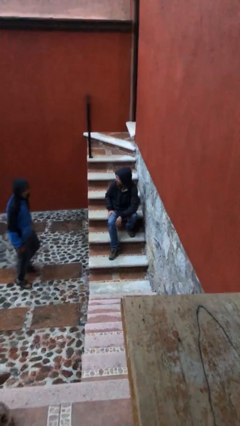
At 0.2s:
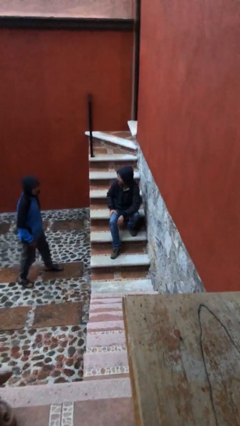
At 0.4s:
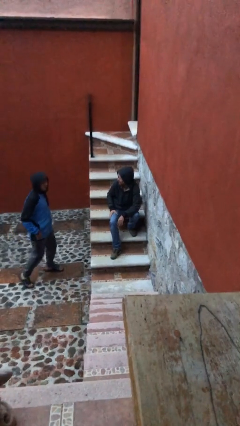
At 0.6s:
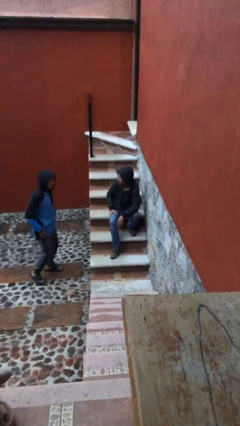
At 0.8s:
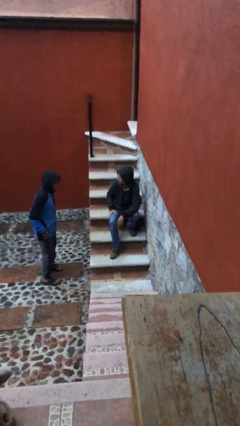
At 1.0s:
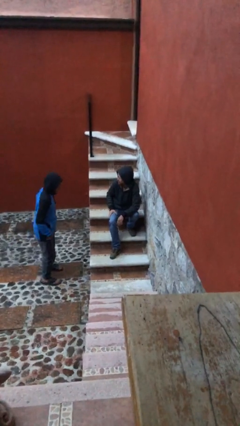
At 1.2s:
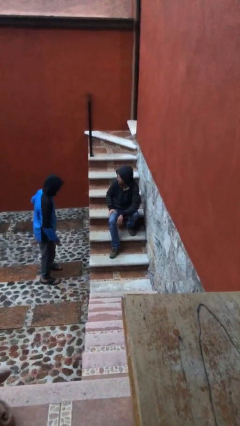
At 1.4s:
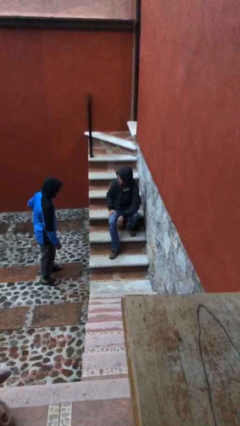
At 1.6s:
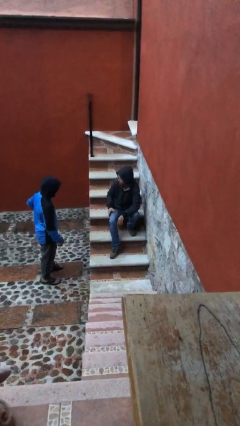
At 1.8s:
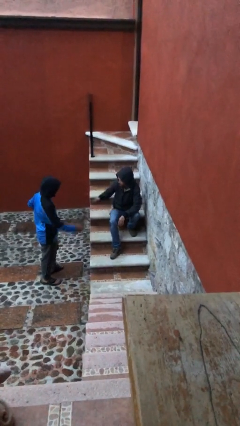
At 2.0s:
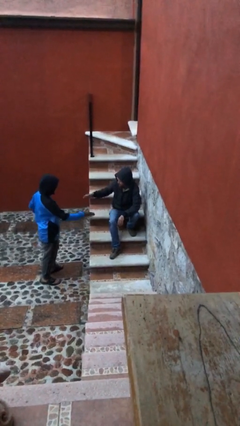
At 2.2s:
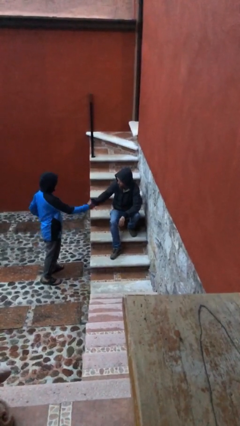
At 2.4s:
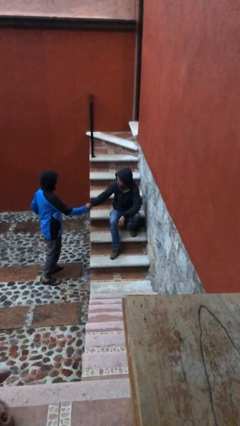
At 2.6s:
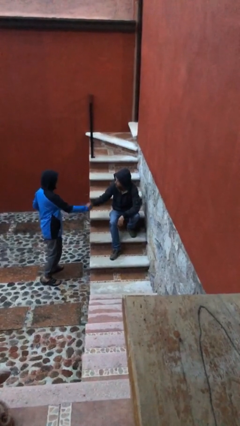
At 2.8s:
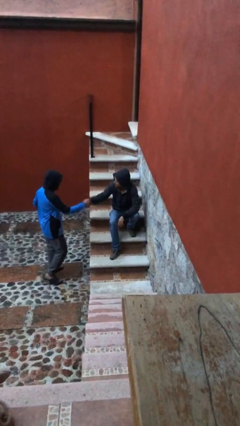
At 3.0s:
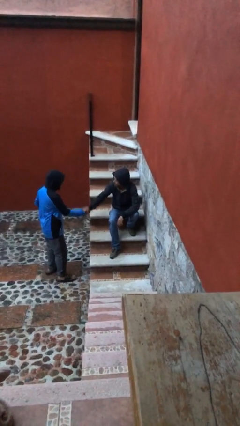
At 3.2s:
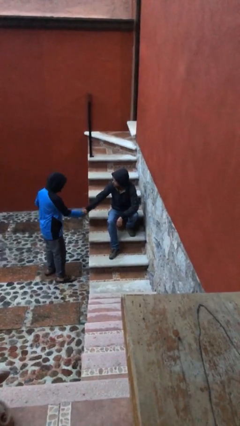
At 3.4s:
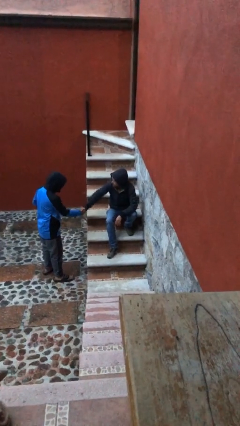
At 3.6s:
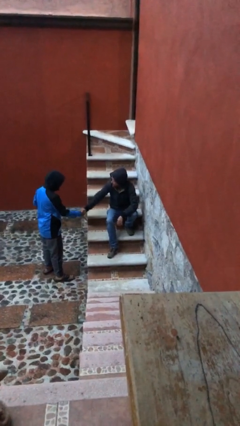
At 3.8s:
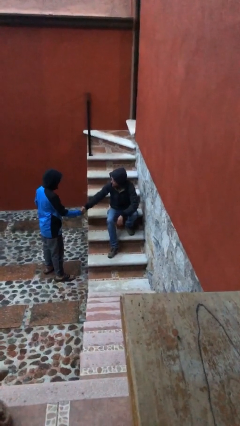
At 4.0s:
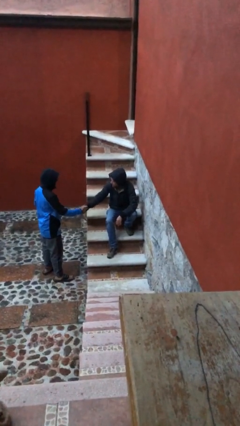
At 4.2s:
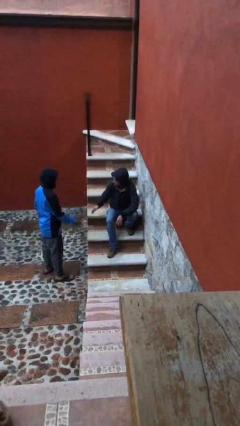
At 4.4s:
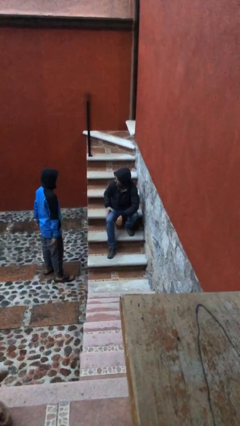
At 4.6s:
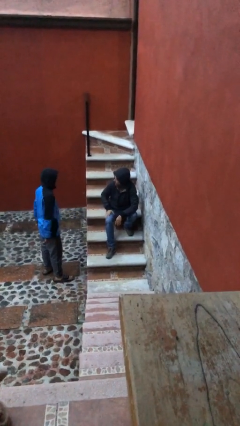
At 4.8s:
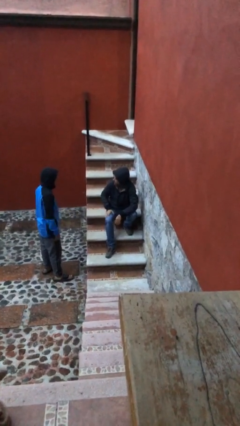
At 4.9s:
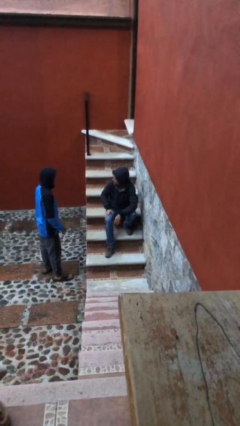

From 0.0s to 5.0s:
person shakes hand

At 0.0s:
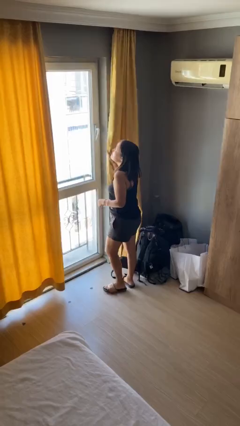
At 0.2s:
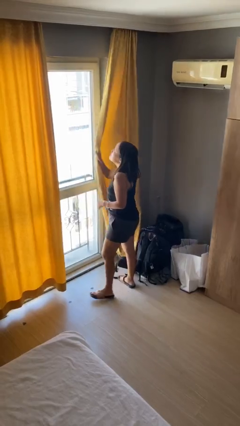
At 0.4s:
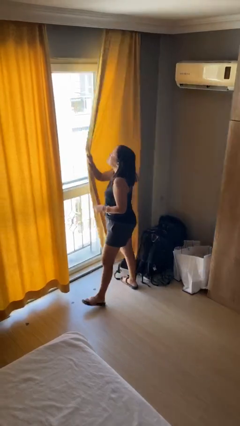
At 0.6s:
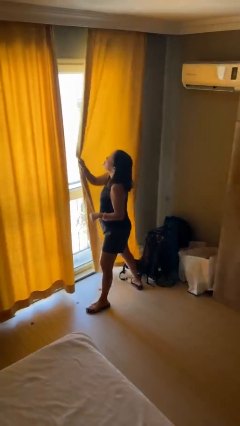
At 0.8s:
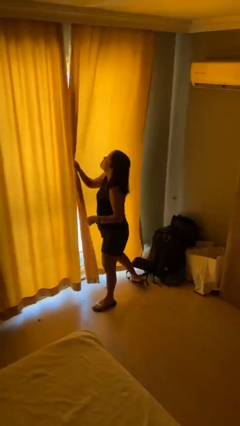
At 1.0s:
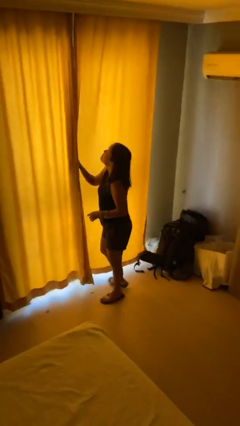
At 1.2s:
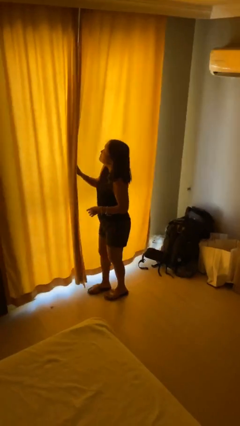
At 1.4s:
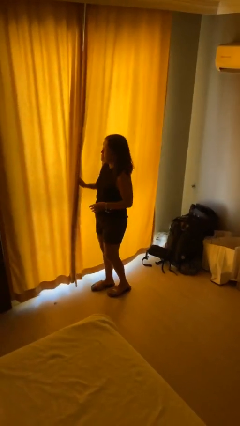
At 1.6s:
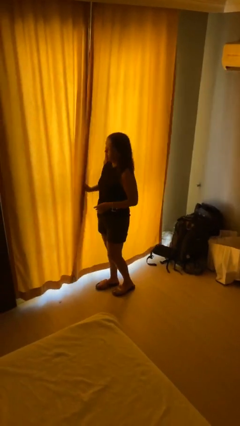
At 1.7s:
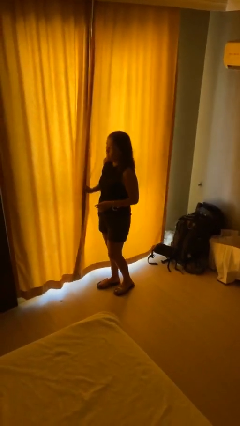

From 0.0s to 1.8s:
person closes curtains

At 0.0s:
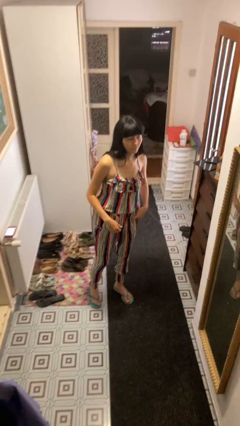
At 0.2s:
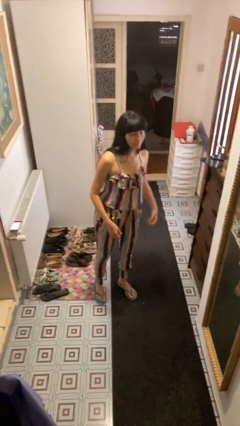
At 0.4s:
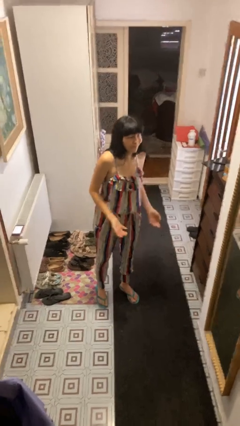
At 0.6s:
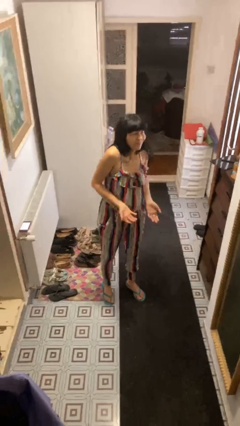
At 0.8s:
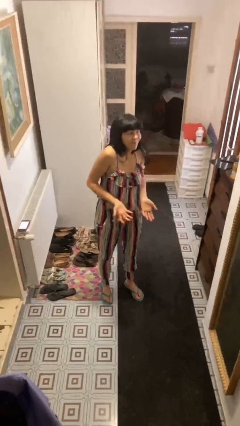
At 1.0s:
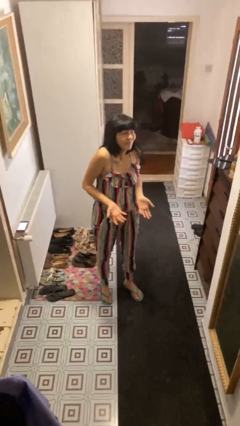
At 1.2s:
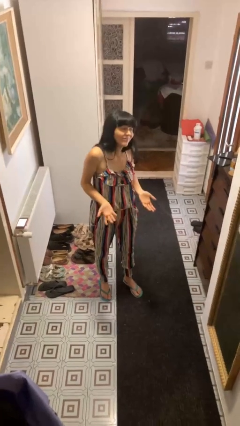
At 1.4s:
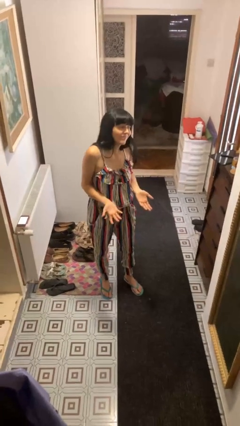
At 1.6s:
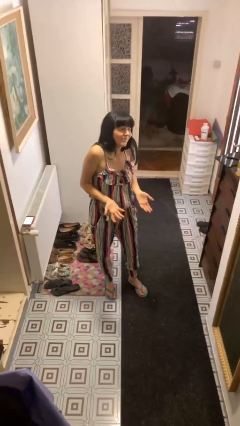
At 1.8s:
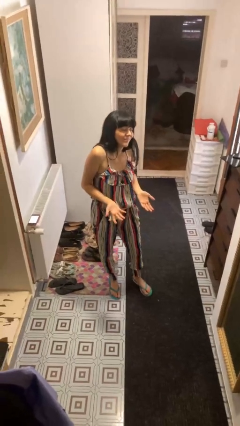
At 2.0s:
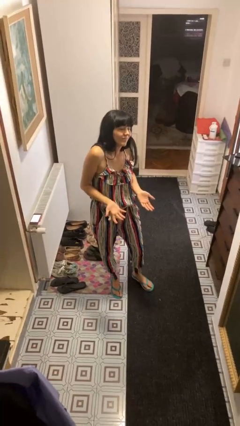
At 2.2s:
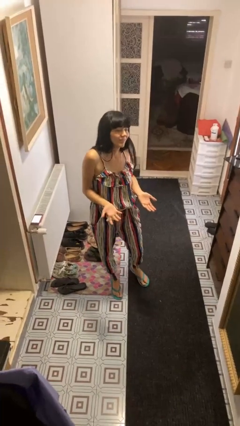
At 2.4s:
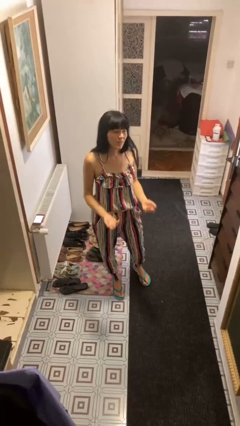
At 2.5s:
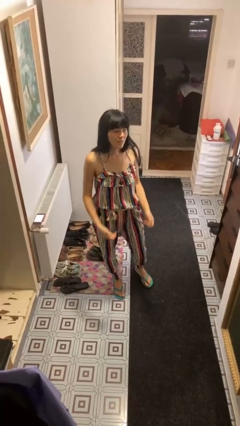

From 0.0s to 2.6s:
person shrugs

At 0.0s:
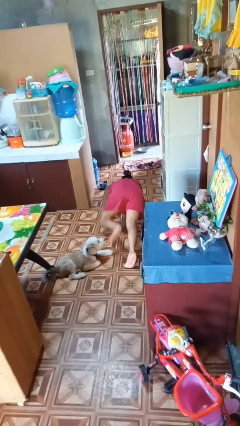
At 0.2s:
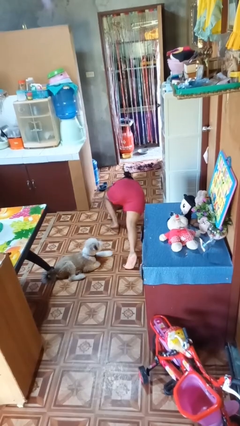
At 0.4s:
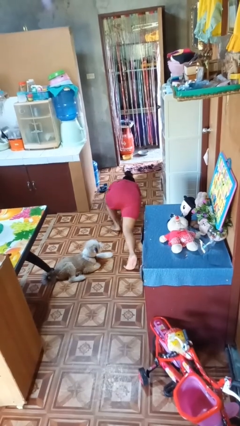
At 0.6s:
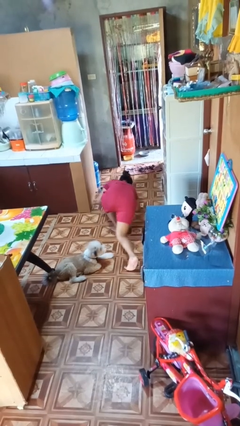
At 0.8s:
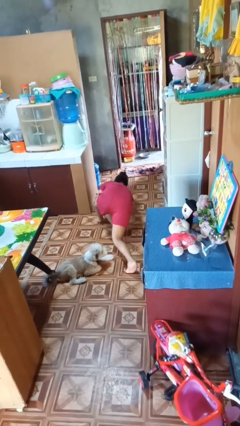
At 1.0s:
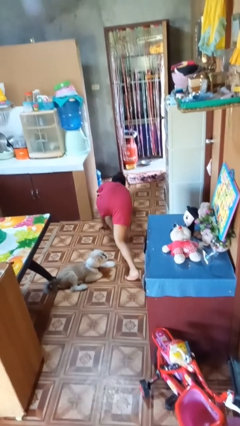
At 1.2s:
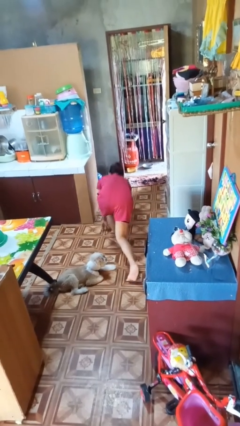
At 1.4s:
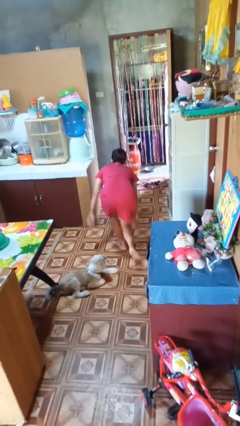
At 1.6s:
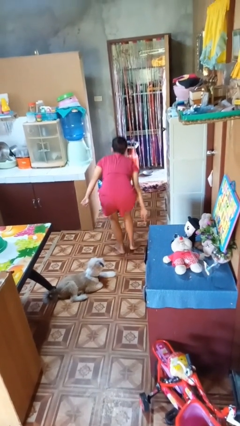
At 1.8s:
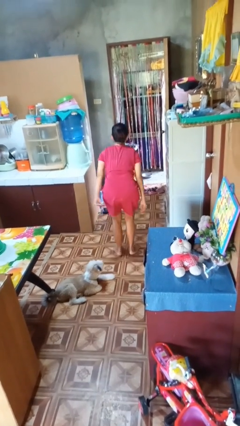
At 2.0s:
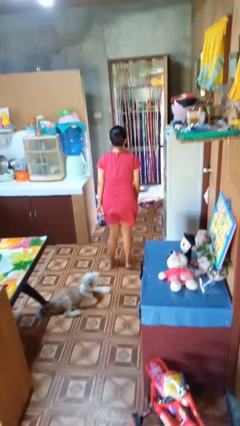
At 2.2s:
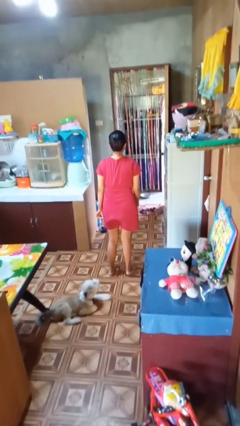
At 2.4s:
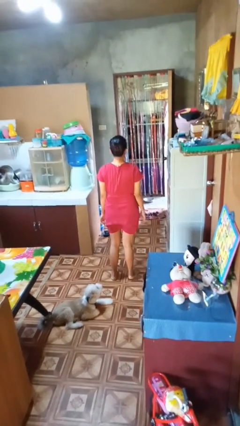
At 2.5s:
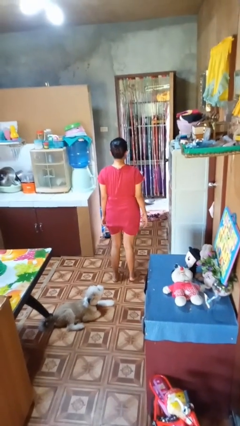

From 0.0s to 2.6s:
person stands up from floor

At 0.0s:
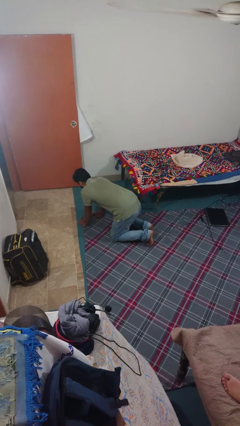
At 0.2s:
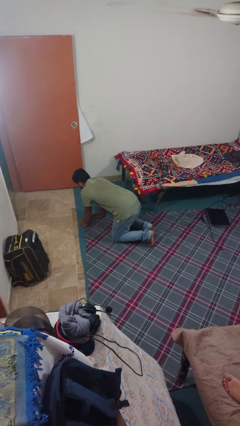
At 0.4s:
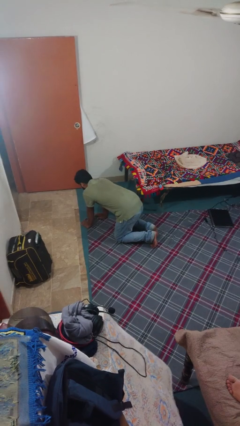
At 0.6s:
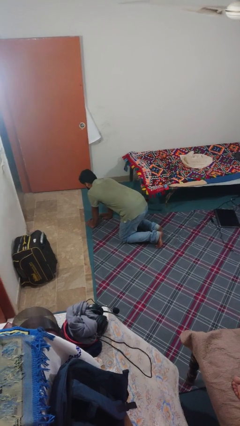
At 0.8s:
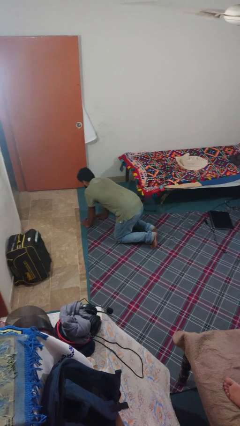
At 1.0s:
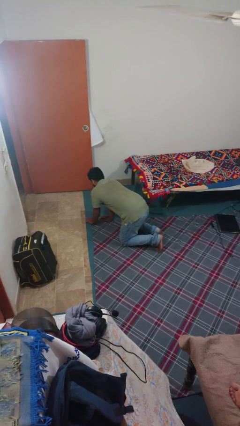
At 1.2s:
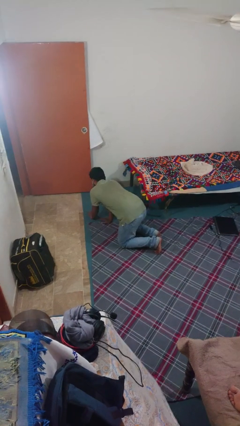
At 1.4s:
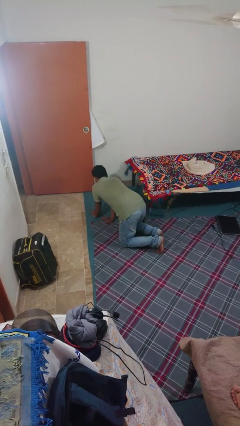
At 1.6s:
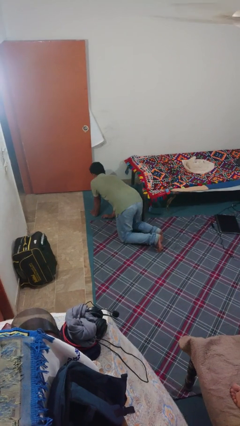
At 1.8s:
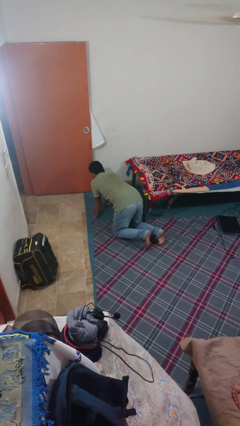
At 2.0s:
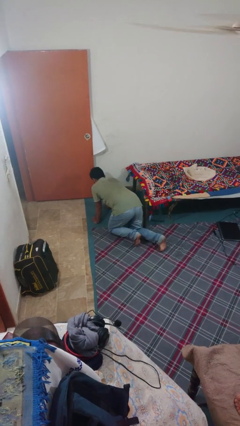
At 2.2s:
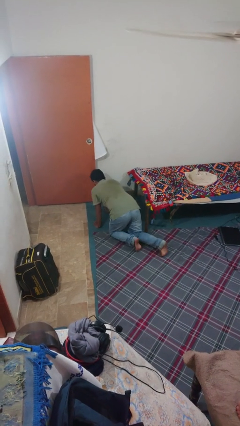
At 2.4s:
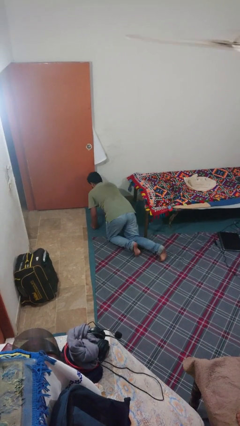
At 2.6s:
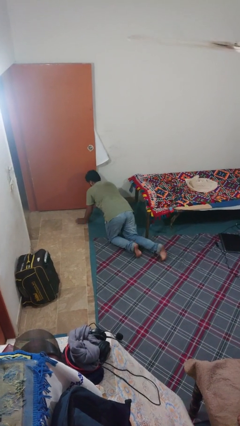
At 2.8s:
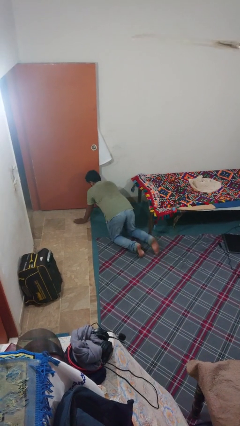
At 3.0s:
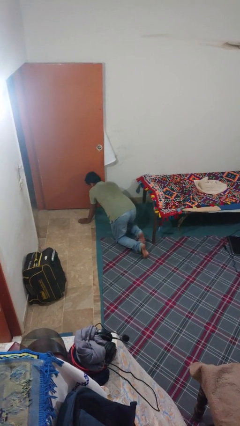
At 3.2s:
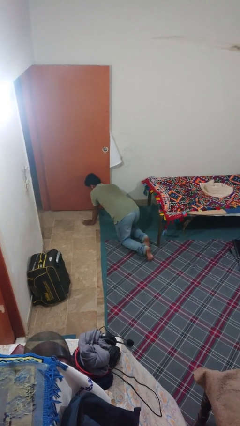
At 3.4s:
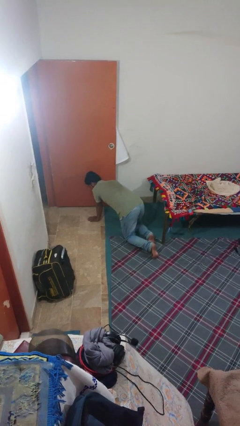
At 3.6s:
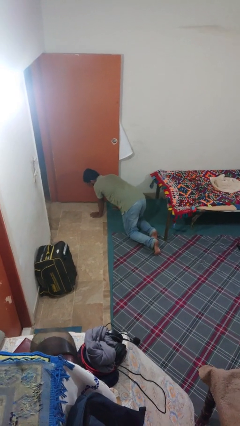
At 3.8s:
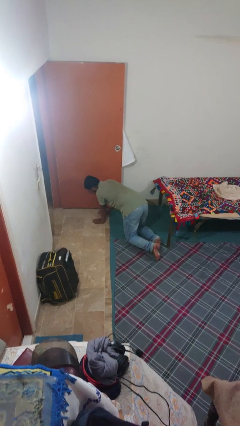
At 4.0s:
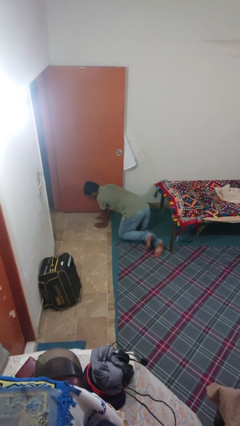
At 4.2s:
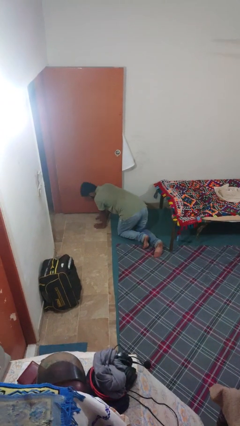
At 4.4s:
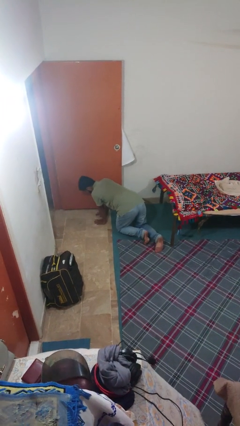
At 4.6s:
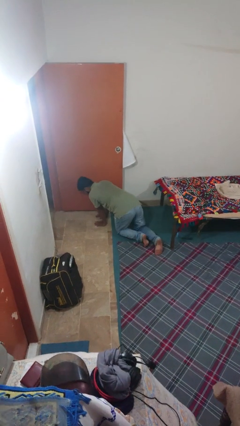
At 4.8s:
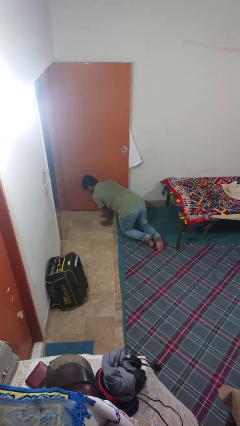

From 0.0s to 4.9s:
person crawls

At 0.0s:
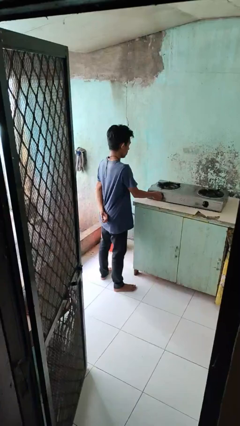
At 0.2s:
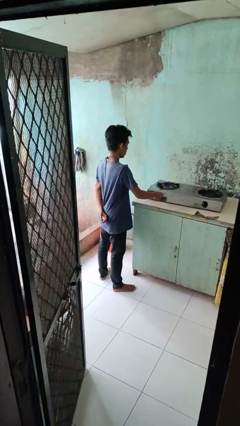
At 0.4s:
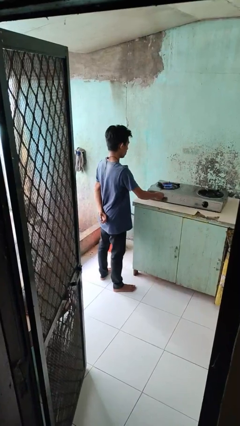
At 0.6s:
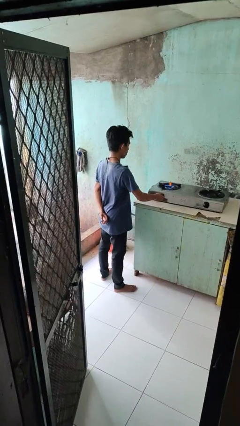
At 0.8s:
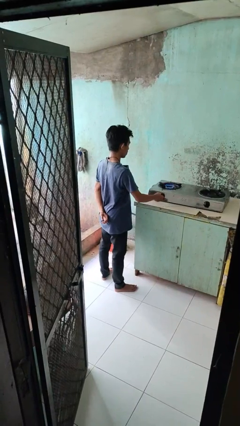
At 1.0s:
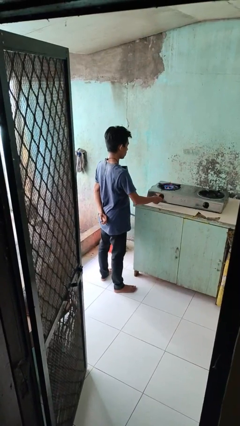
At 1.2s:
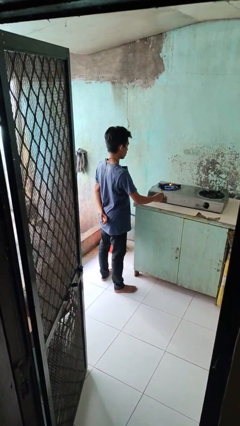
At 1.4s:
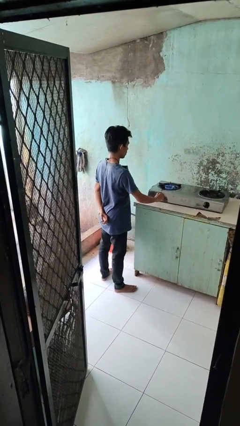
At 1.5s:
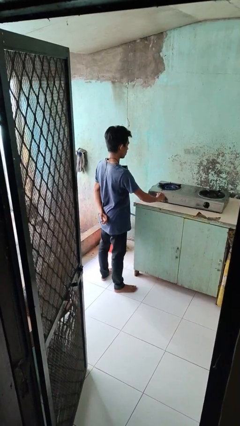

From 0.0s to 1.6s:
person turns on stovetop
